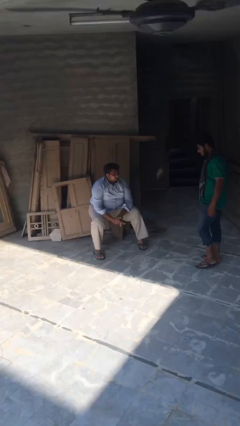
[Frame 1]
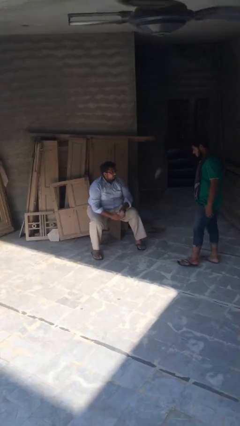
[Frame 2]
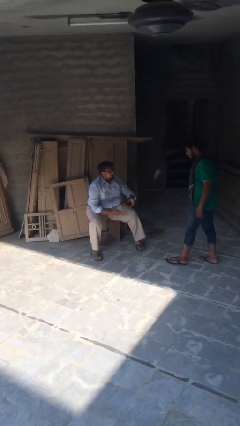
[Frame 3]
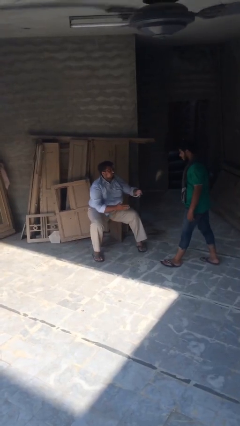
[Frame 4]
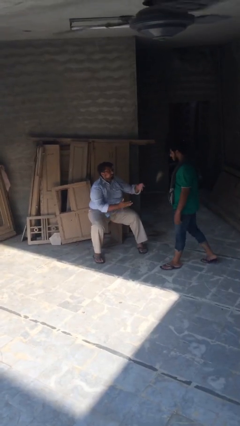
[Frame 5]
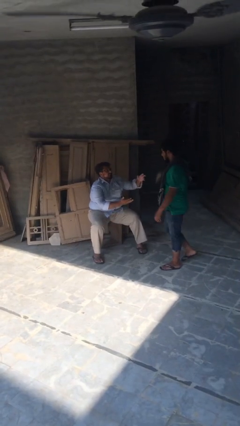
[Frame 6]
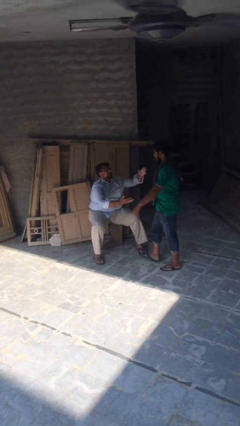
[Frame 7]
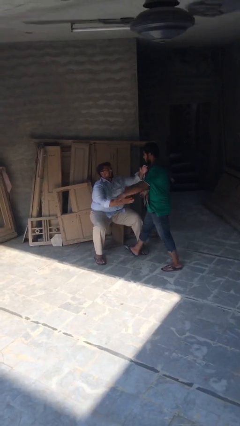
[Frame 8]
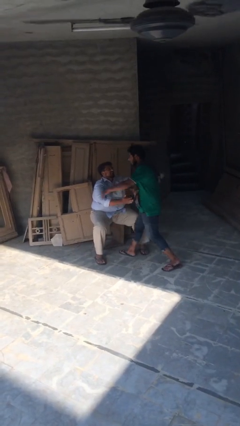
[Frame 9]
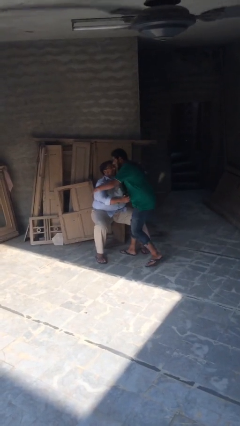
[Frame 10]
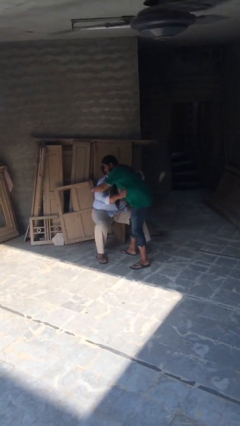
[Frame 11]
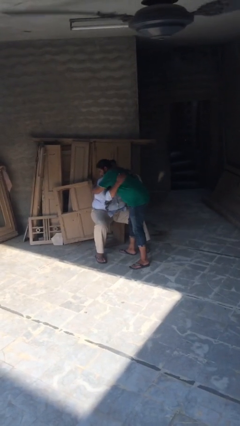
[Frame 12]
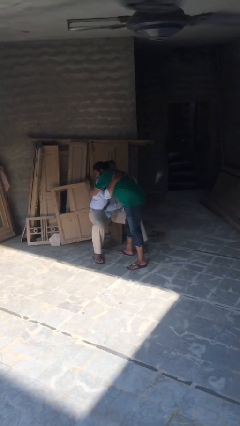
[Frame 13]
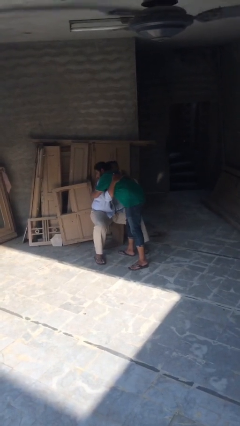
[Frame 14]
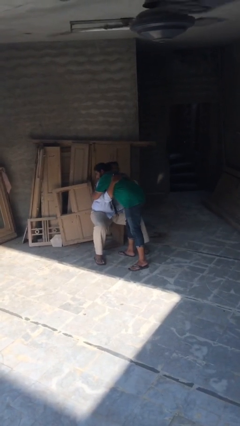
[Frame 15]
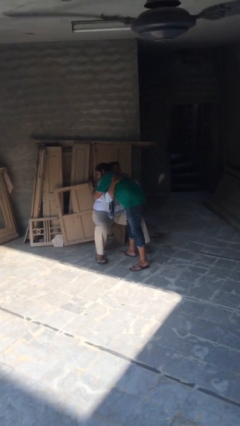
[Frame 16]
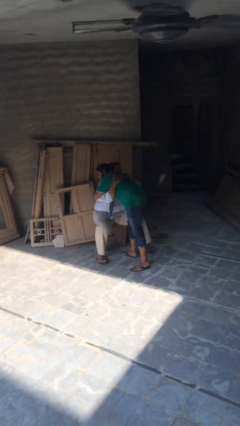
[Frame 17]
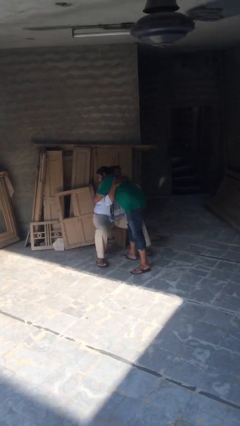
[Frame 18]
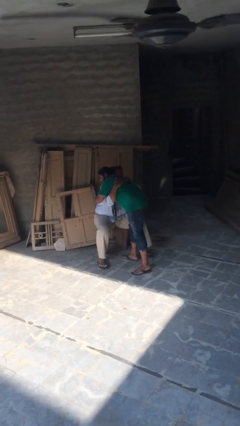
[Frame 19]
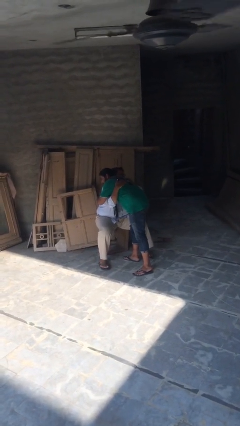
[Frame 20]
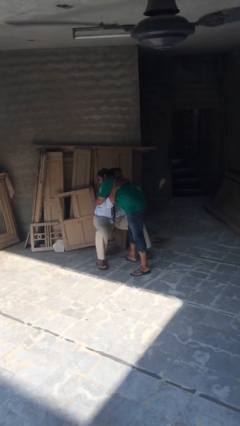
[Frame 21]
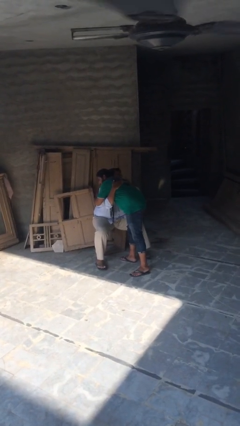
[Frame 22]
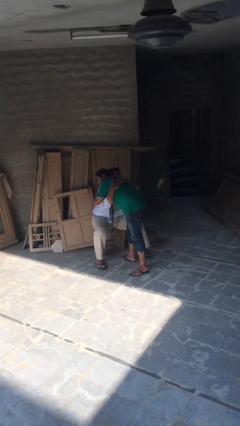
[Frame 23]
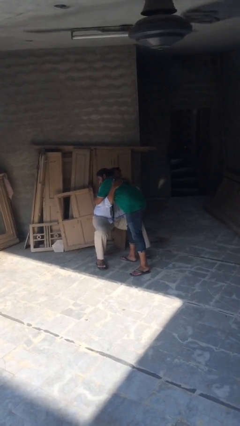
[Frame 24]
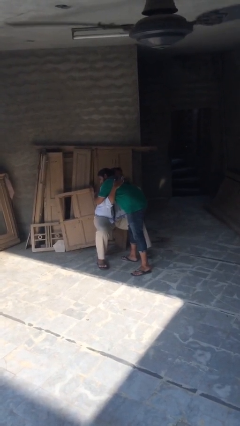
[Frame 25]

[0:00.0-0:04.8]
person embraces person

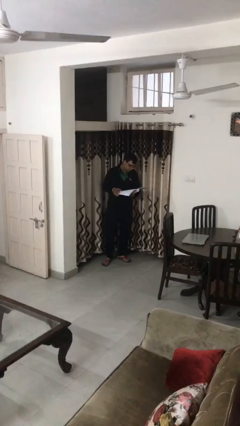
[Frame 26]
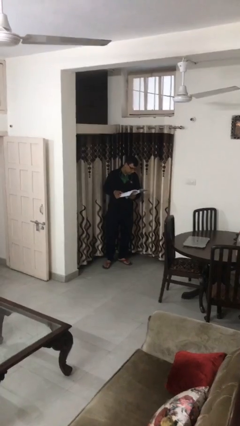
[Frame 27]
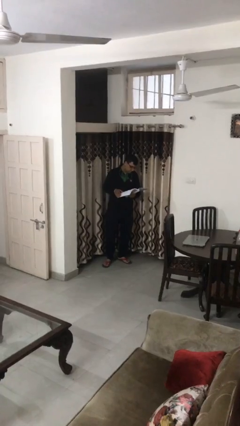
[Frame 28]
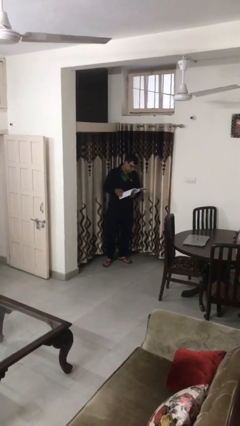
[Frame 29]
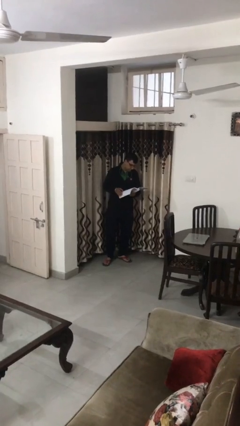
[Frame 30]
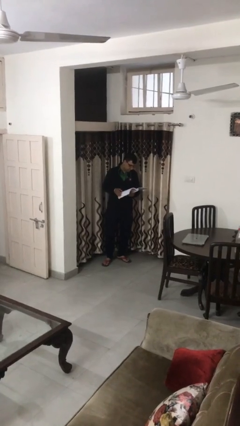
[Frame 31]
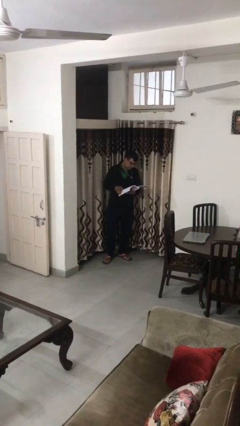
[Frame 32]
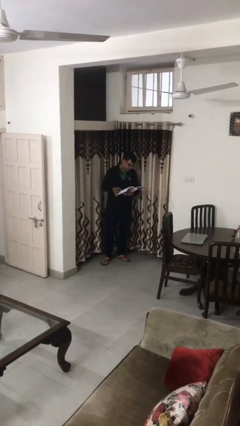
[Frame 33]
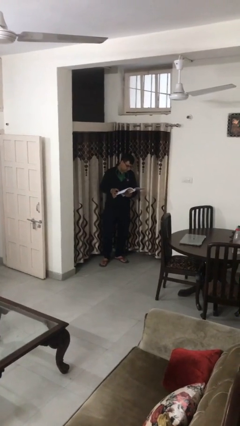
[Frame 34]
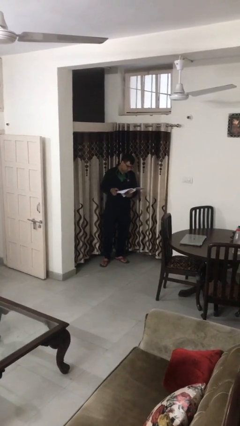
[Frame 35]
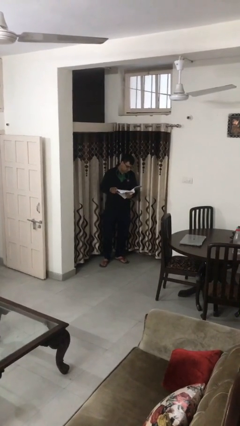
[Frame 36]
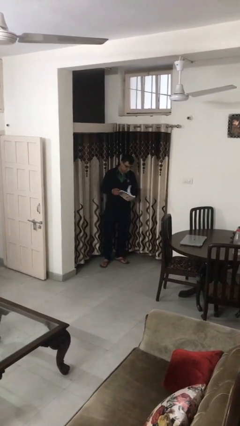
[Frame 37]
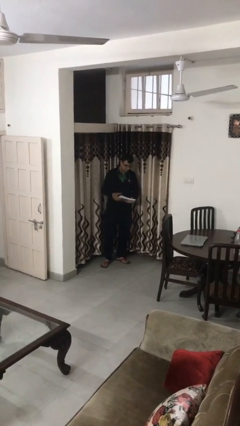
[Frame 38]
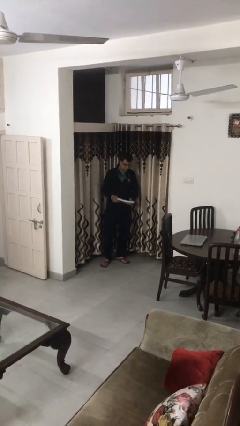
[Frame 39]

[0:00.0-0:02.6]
person reads document

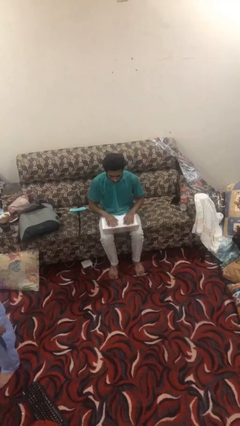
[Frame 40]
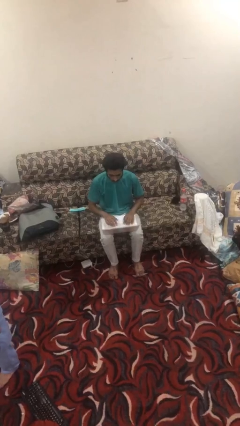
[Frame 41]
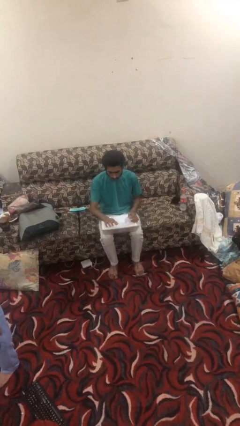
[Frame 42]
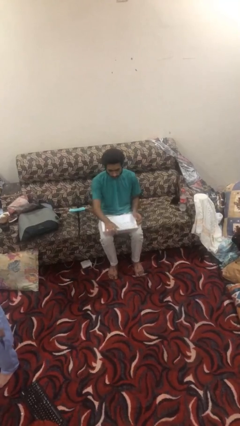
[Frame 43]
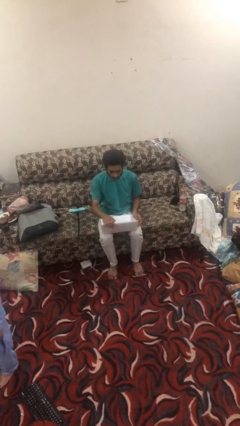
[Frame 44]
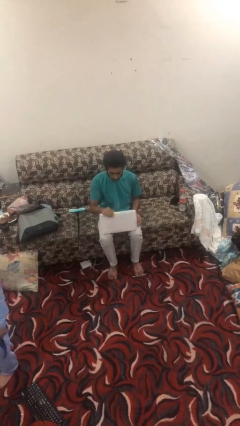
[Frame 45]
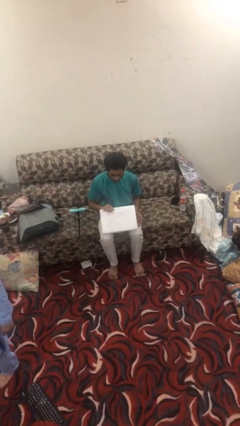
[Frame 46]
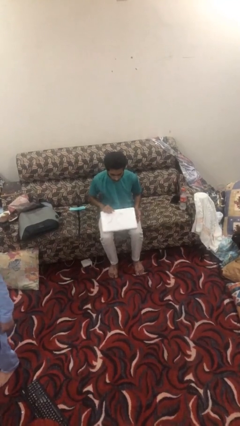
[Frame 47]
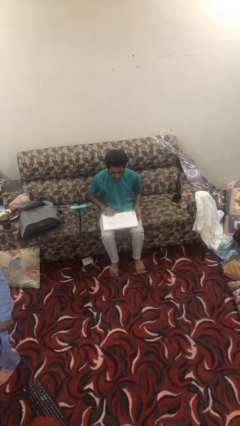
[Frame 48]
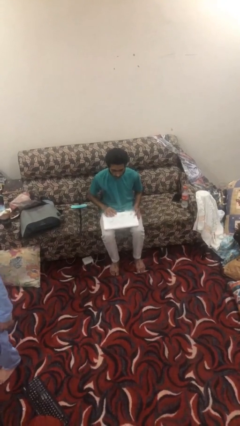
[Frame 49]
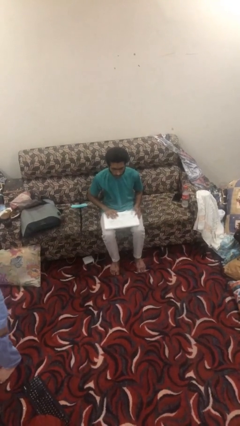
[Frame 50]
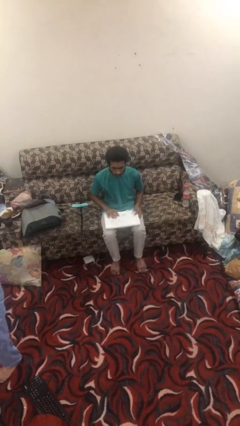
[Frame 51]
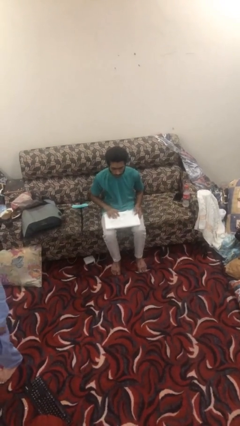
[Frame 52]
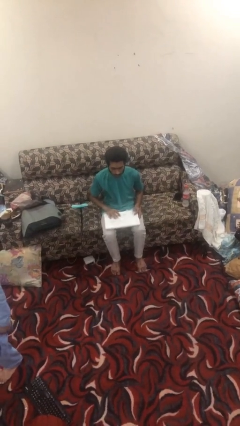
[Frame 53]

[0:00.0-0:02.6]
person closes laptop

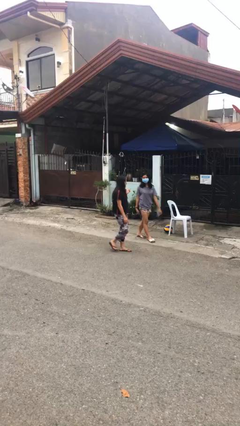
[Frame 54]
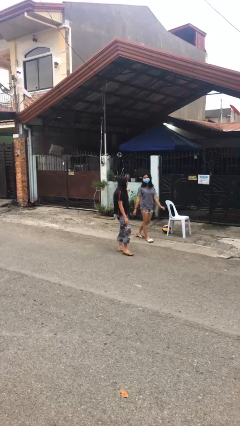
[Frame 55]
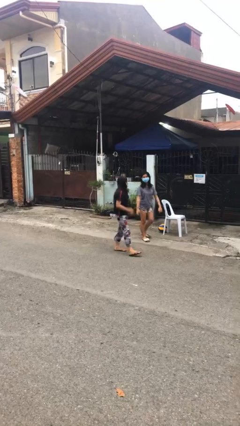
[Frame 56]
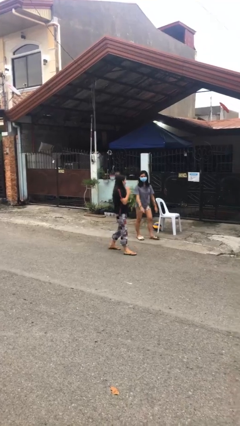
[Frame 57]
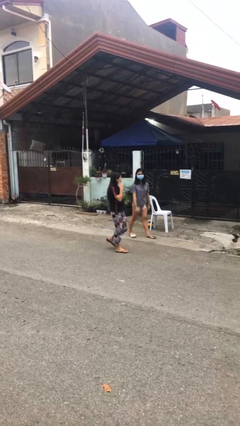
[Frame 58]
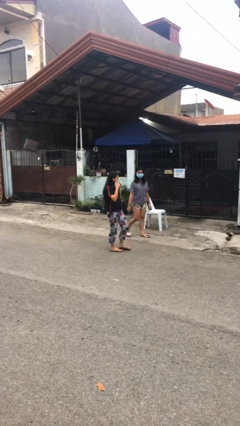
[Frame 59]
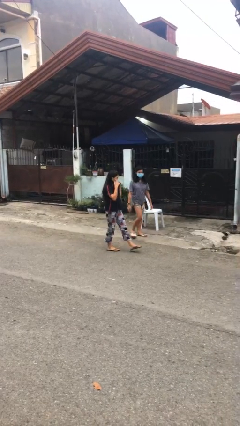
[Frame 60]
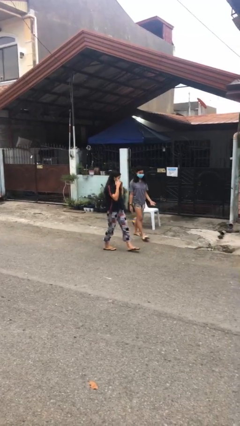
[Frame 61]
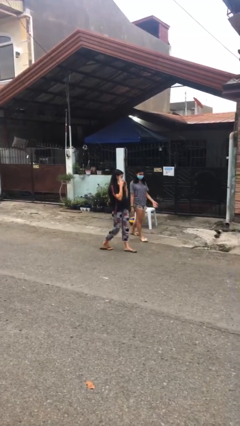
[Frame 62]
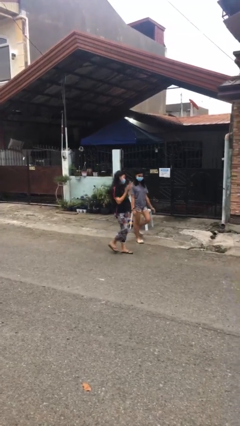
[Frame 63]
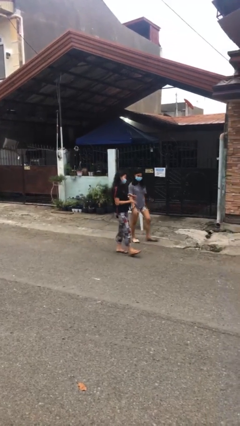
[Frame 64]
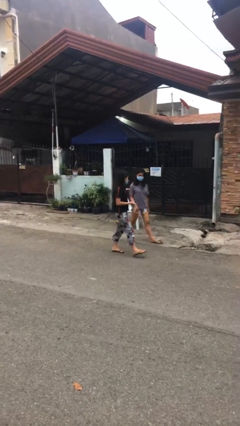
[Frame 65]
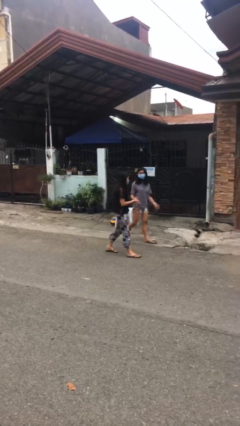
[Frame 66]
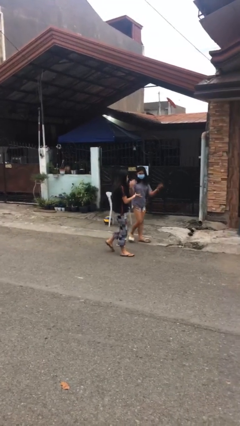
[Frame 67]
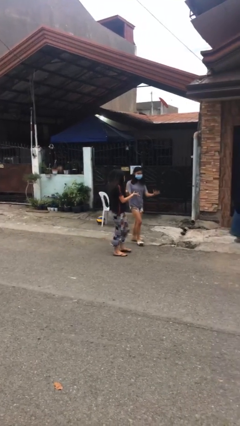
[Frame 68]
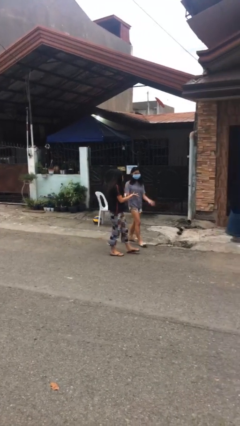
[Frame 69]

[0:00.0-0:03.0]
person talks to person

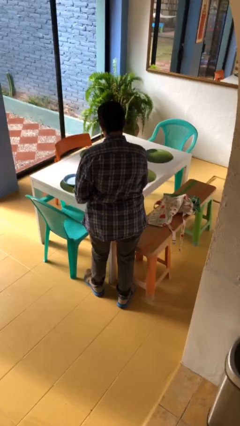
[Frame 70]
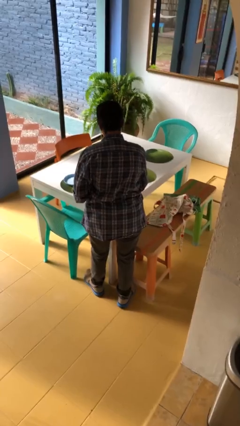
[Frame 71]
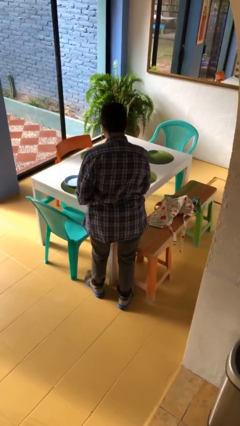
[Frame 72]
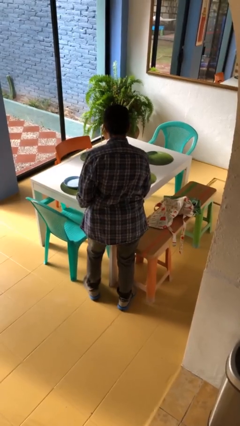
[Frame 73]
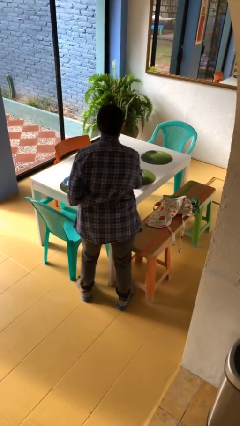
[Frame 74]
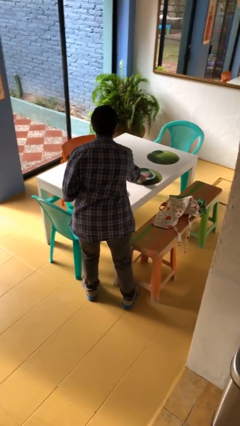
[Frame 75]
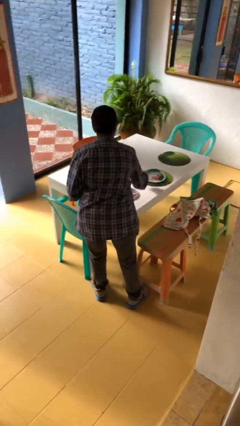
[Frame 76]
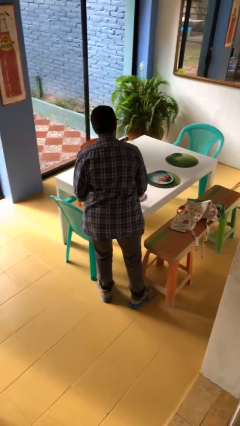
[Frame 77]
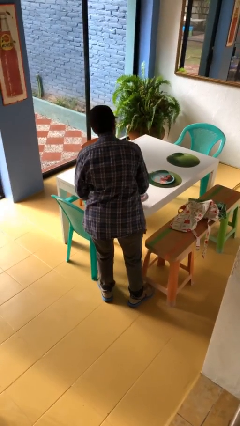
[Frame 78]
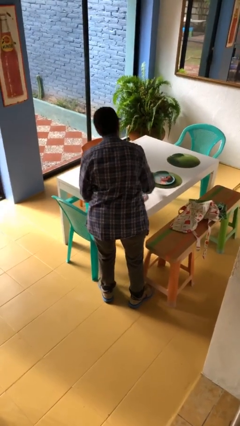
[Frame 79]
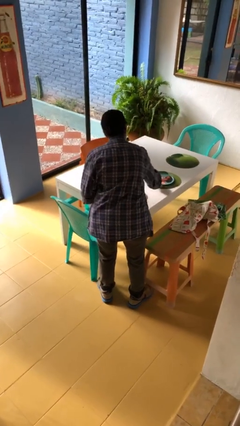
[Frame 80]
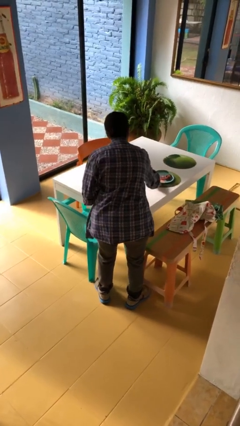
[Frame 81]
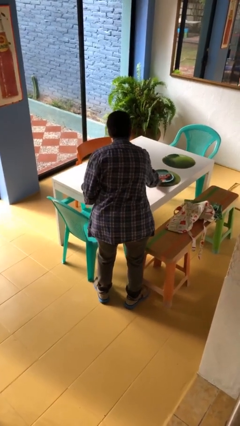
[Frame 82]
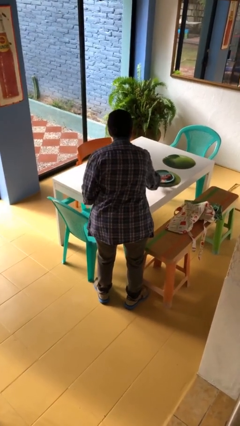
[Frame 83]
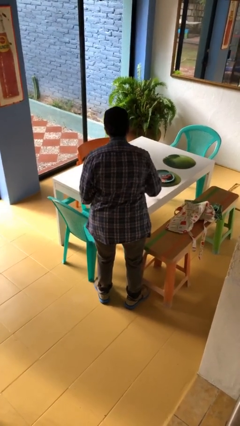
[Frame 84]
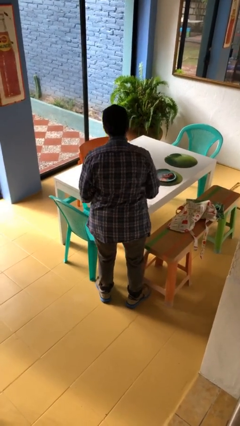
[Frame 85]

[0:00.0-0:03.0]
person sets table

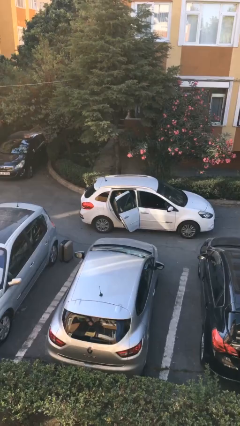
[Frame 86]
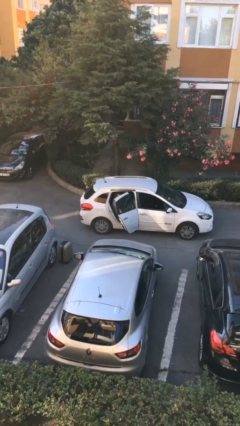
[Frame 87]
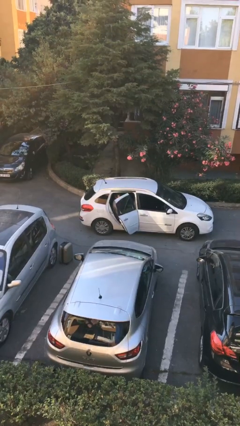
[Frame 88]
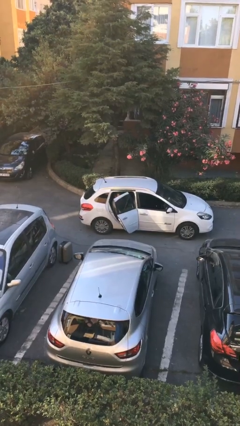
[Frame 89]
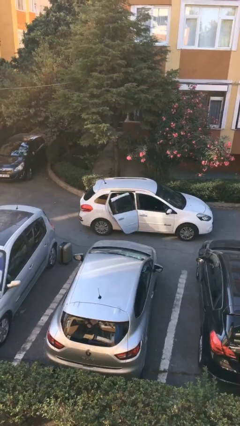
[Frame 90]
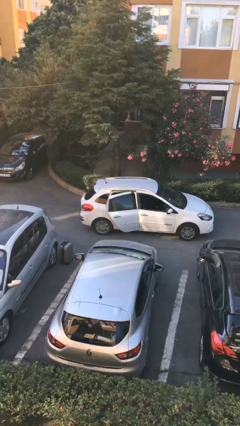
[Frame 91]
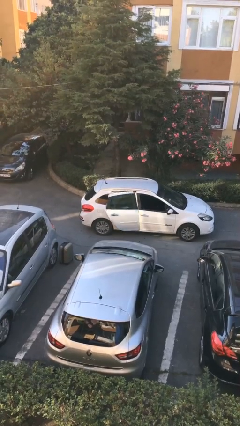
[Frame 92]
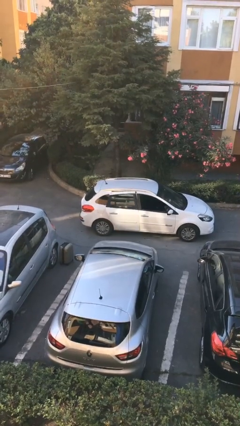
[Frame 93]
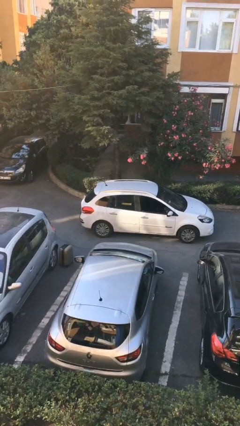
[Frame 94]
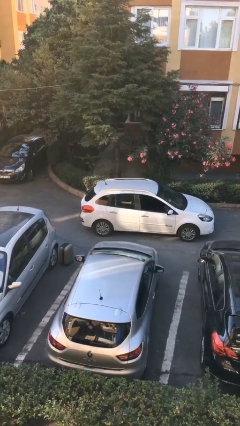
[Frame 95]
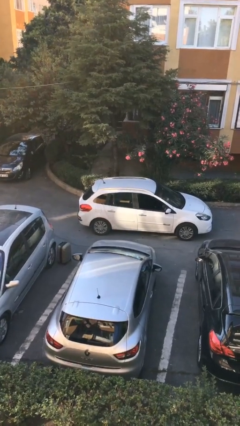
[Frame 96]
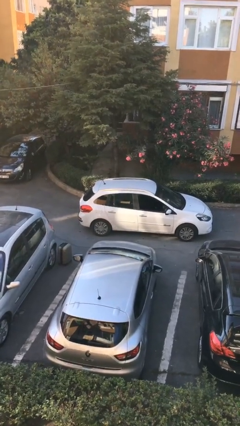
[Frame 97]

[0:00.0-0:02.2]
person closes car door
